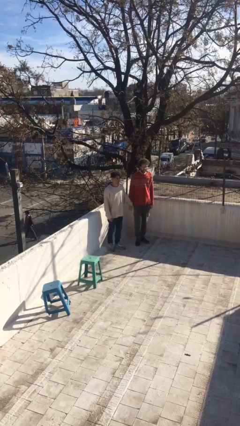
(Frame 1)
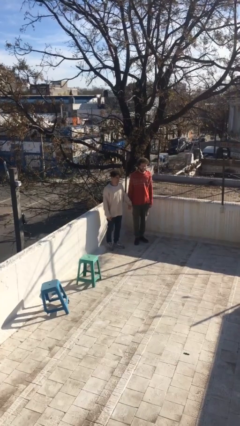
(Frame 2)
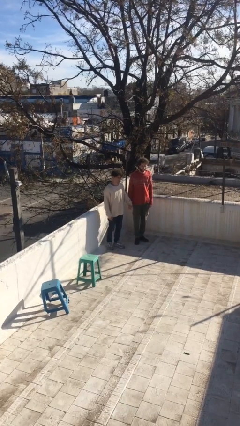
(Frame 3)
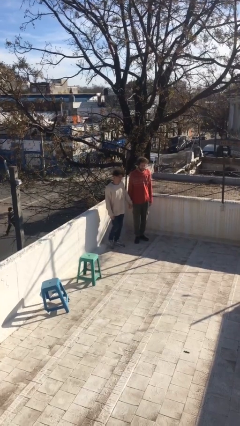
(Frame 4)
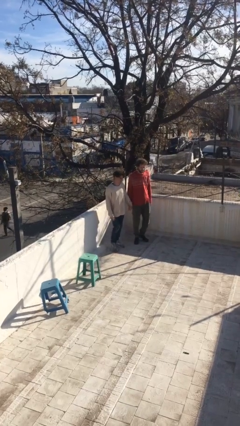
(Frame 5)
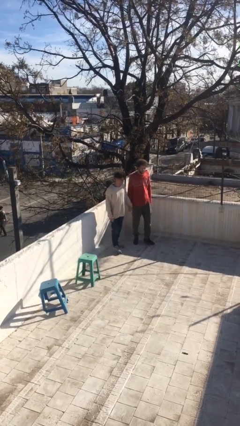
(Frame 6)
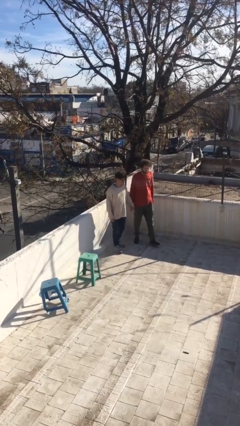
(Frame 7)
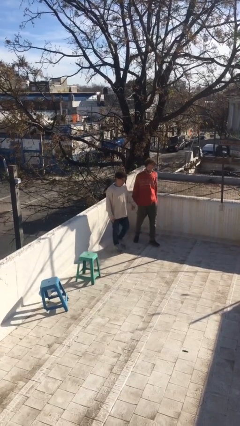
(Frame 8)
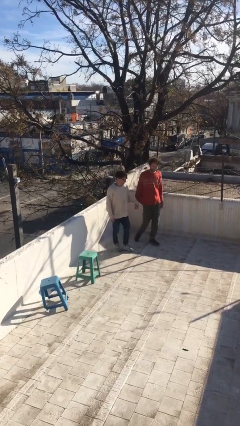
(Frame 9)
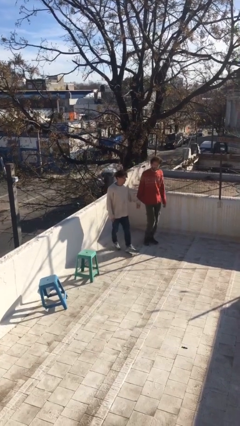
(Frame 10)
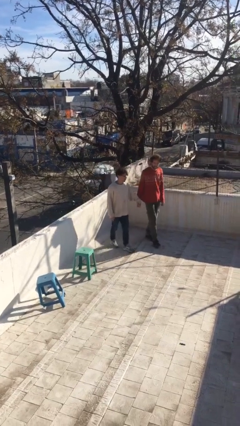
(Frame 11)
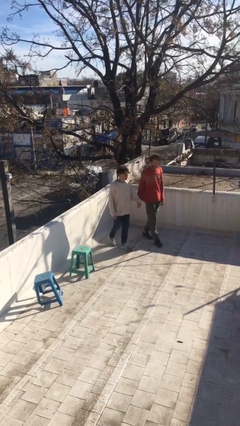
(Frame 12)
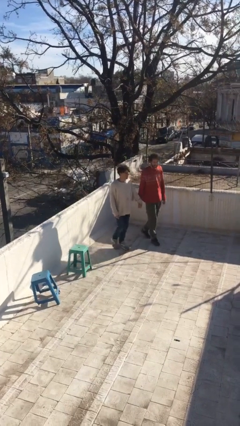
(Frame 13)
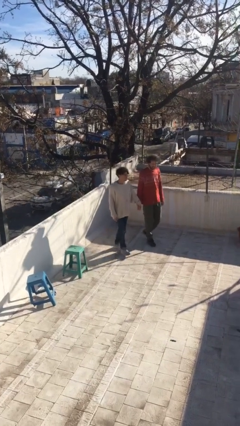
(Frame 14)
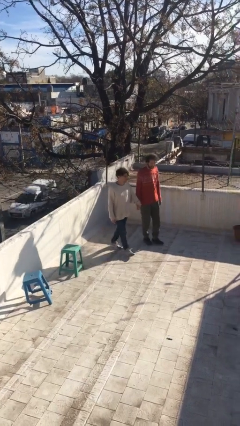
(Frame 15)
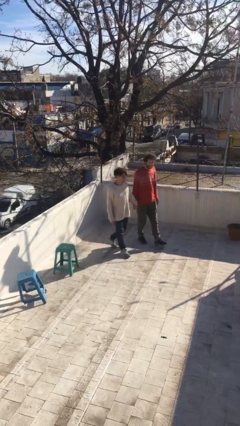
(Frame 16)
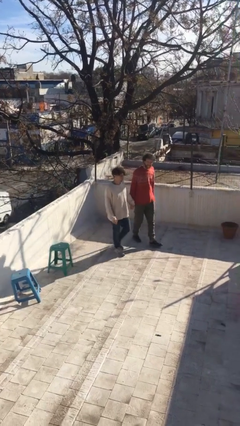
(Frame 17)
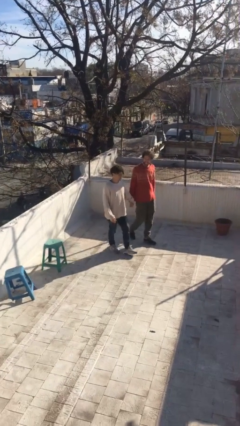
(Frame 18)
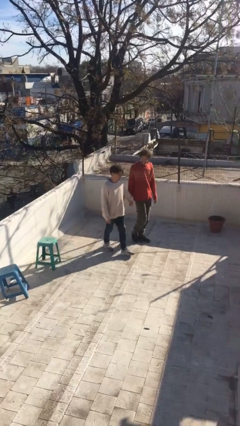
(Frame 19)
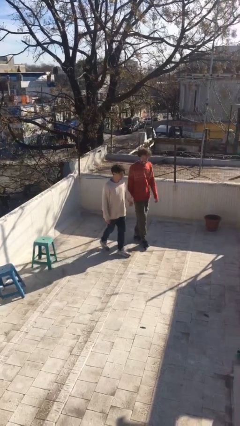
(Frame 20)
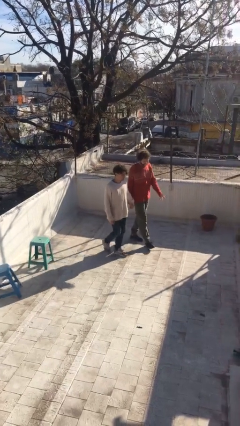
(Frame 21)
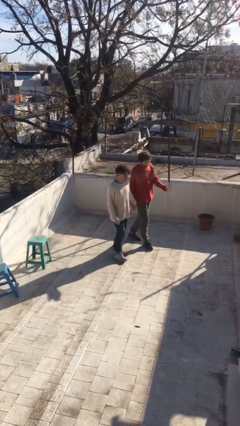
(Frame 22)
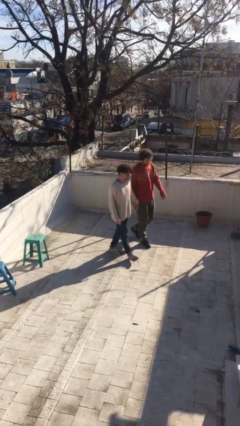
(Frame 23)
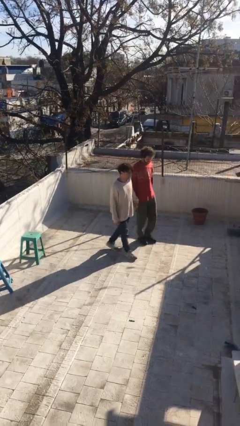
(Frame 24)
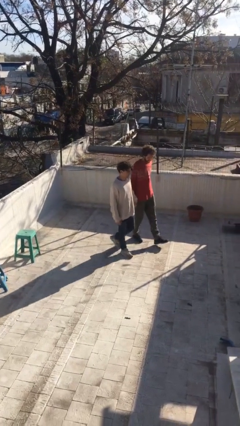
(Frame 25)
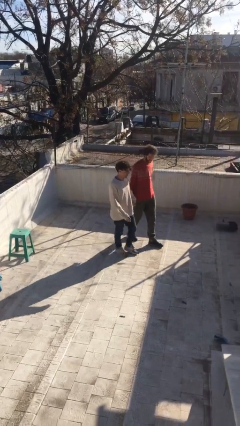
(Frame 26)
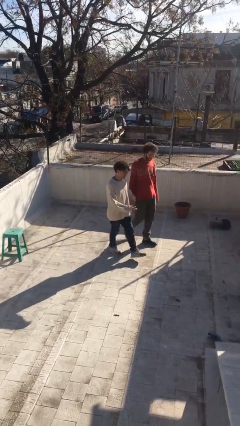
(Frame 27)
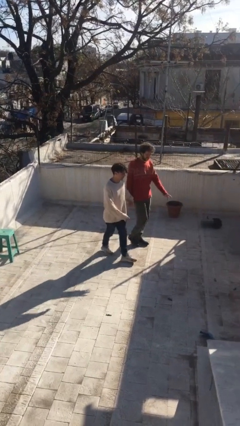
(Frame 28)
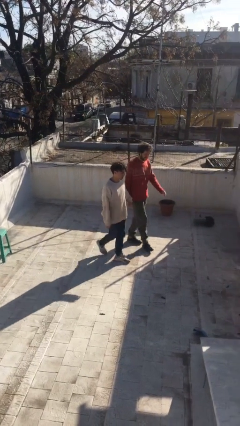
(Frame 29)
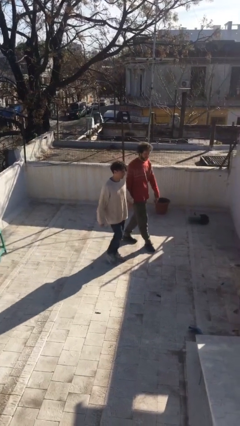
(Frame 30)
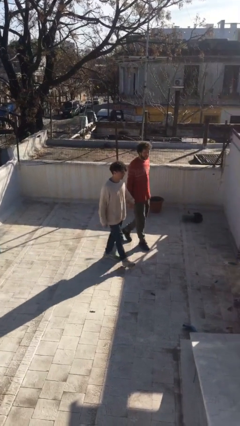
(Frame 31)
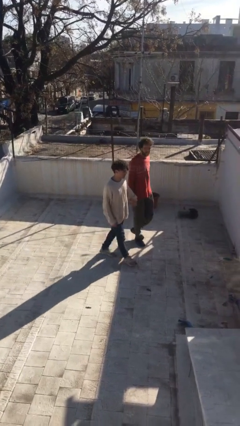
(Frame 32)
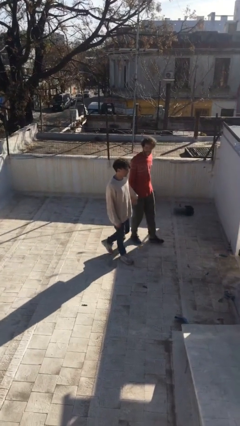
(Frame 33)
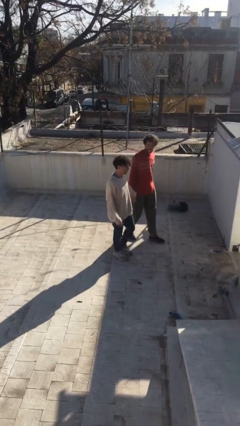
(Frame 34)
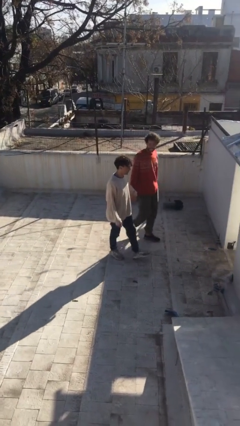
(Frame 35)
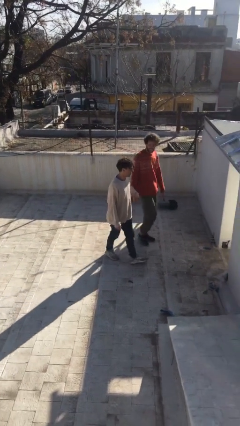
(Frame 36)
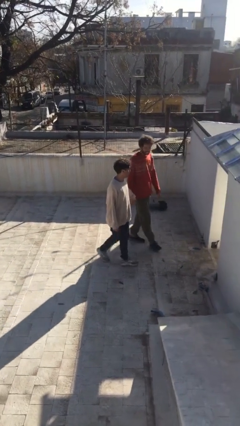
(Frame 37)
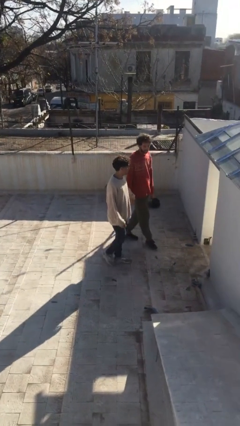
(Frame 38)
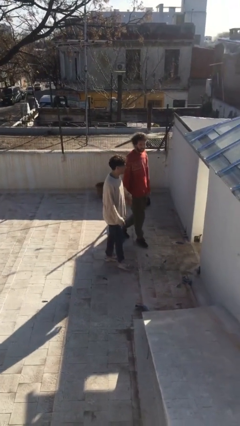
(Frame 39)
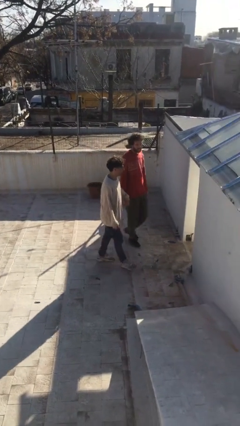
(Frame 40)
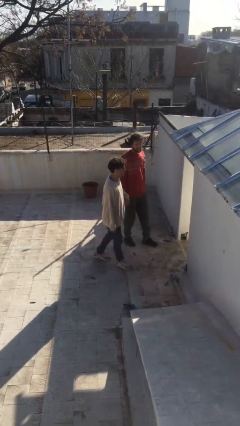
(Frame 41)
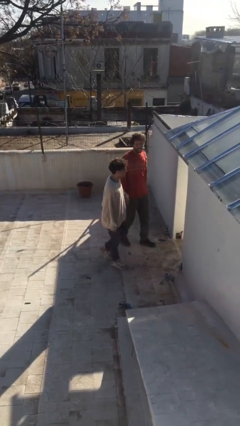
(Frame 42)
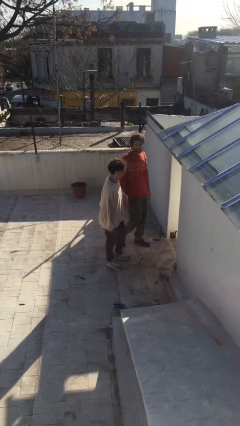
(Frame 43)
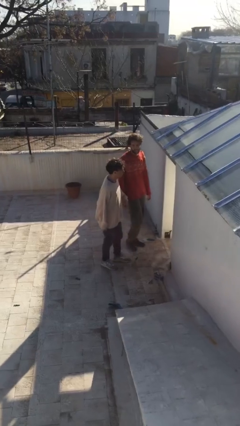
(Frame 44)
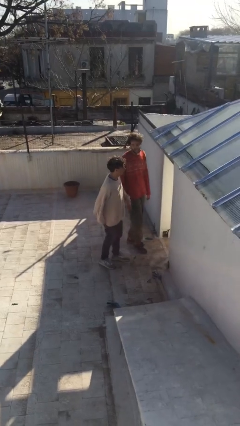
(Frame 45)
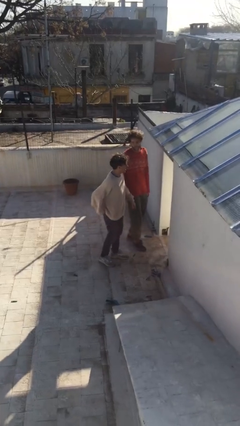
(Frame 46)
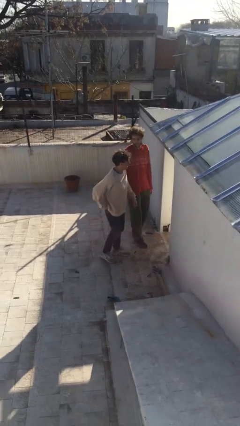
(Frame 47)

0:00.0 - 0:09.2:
person holds hand

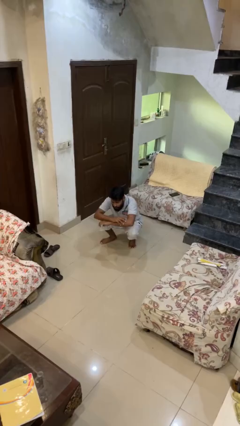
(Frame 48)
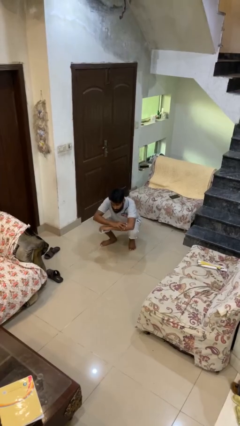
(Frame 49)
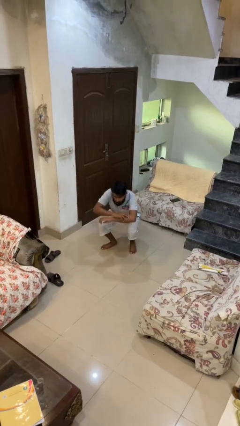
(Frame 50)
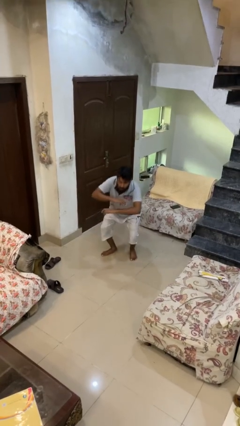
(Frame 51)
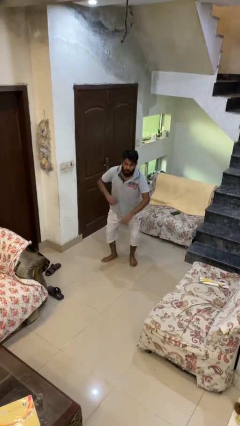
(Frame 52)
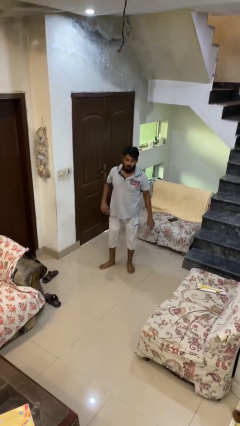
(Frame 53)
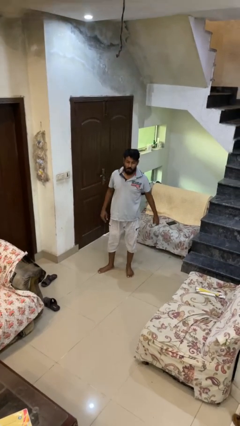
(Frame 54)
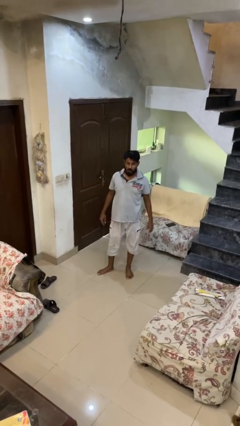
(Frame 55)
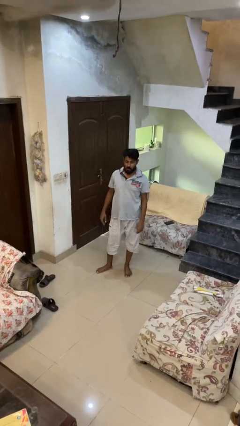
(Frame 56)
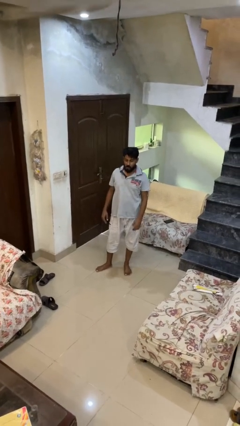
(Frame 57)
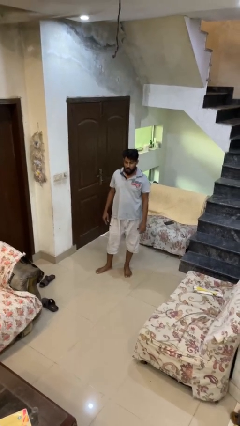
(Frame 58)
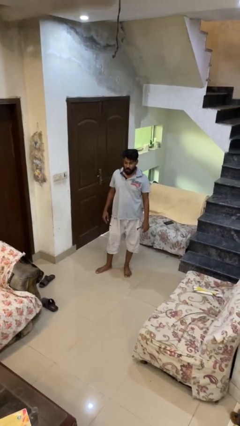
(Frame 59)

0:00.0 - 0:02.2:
person stands up

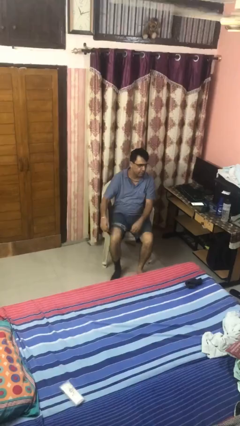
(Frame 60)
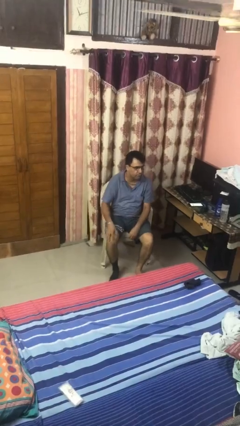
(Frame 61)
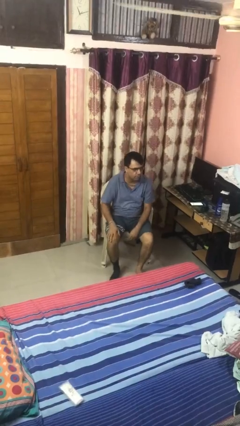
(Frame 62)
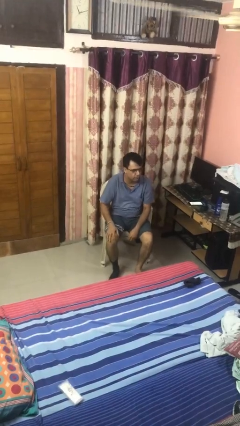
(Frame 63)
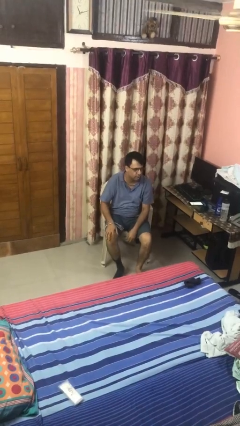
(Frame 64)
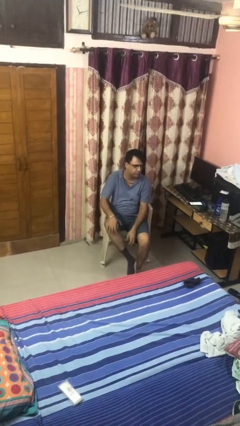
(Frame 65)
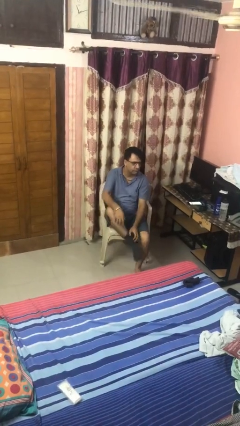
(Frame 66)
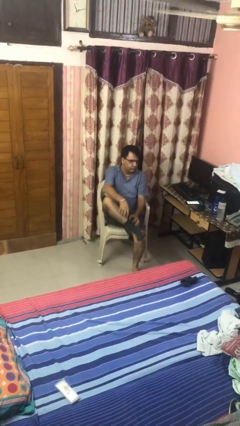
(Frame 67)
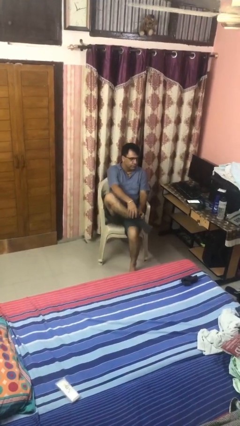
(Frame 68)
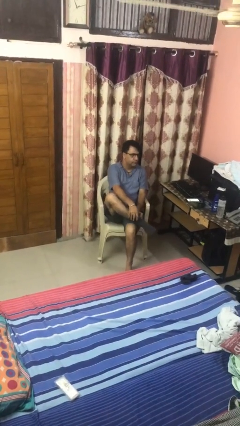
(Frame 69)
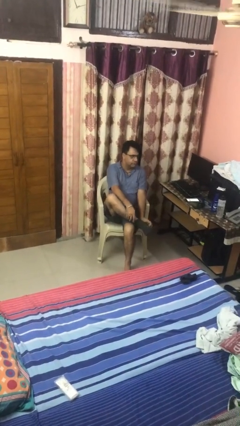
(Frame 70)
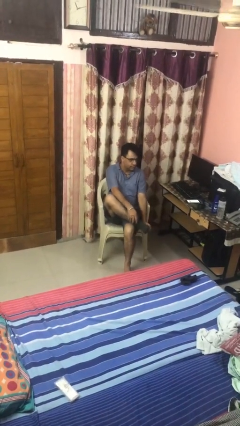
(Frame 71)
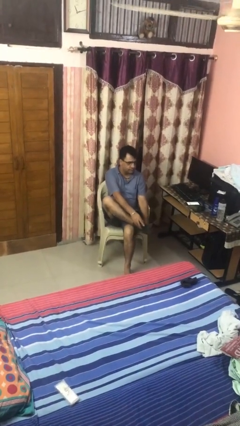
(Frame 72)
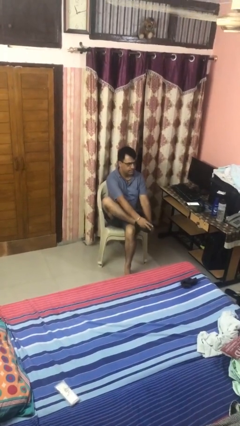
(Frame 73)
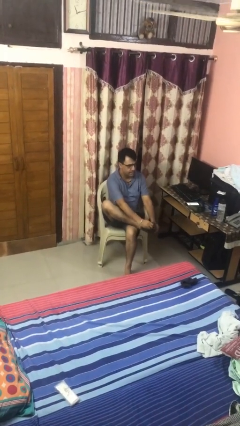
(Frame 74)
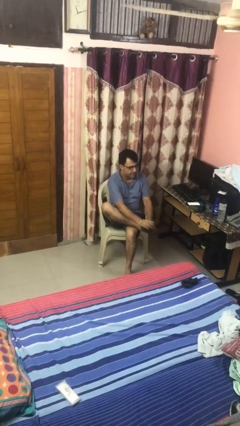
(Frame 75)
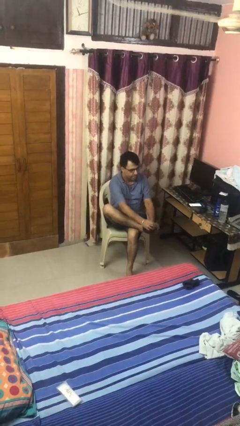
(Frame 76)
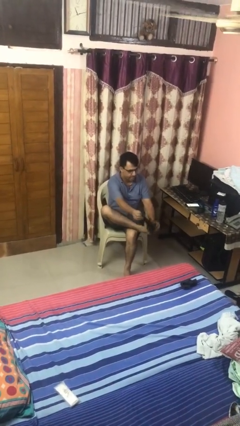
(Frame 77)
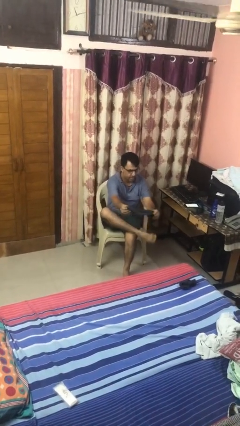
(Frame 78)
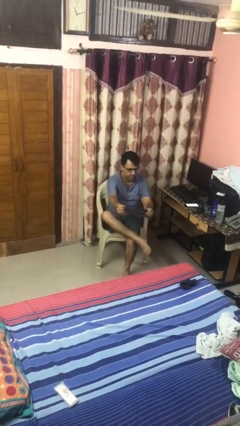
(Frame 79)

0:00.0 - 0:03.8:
person takes off socks

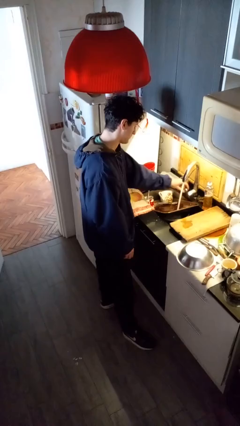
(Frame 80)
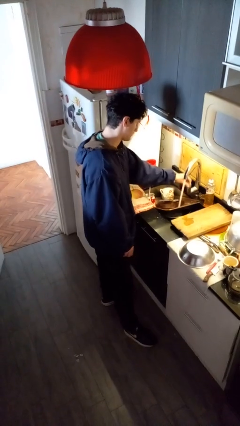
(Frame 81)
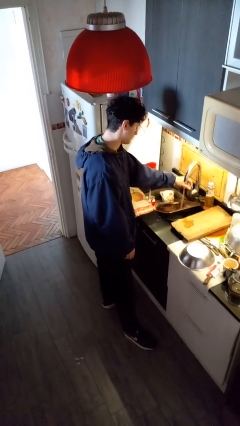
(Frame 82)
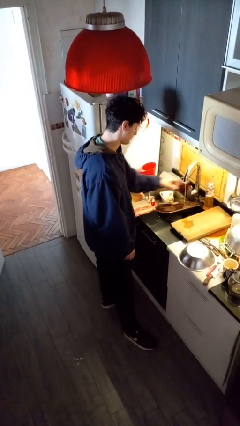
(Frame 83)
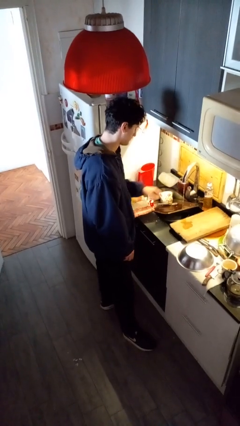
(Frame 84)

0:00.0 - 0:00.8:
person turns off faucet

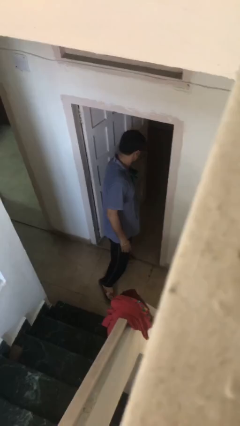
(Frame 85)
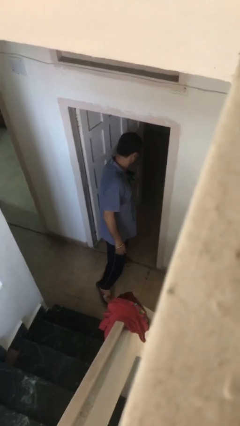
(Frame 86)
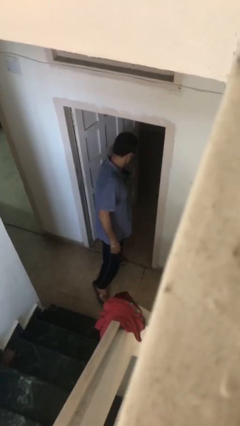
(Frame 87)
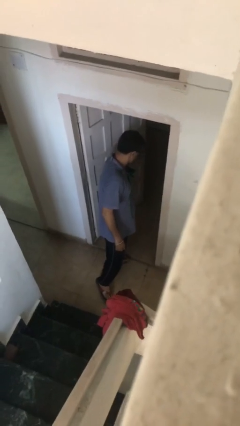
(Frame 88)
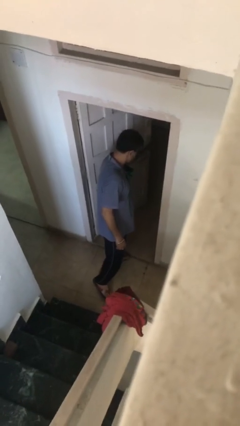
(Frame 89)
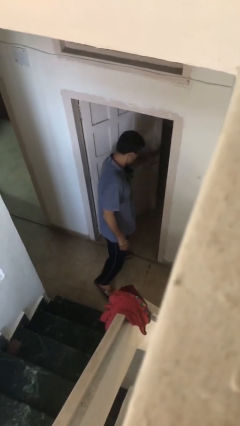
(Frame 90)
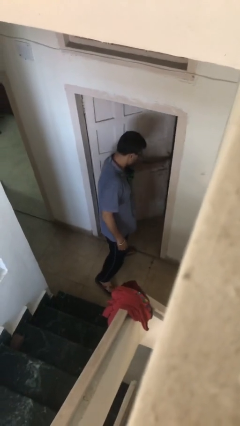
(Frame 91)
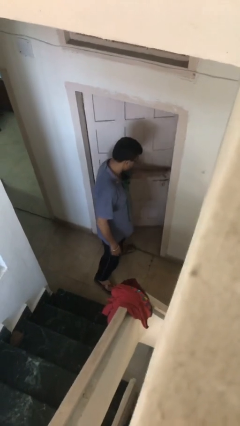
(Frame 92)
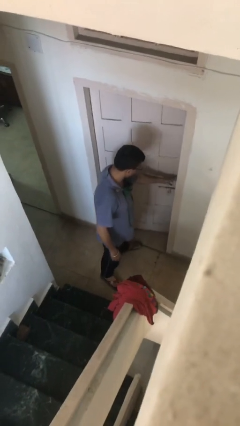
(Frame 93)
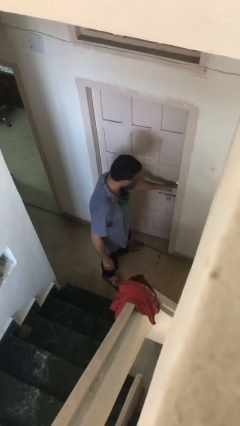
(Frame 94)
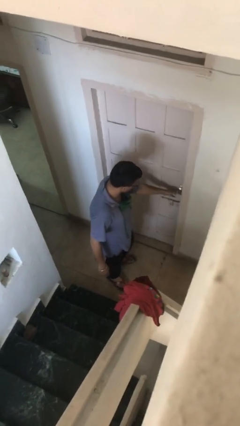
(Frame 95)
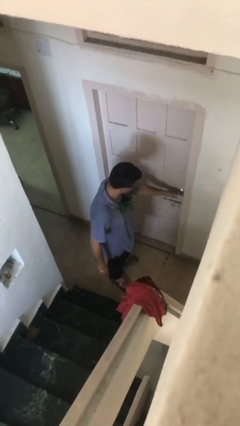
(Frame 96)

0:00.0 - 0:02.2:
person closes facility door
